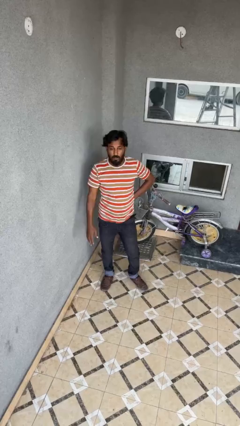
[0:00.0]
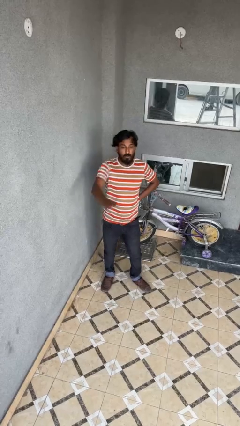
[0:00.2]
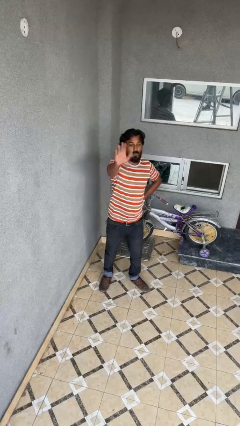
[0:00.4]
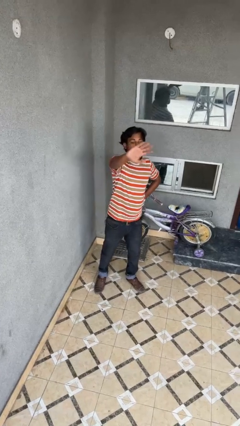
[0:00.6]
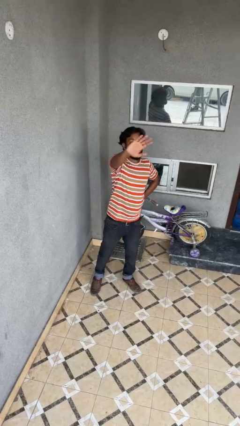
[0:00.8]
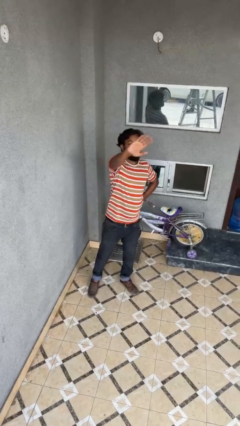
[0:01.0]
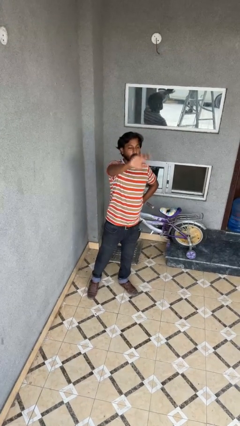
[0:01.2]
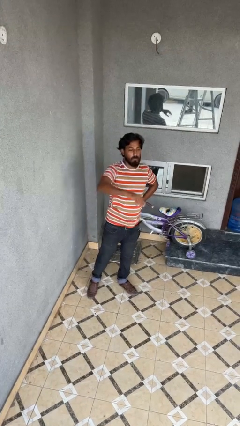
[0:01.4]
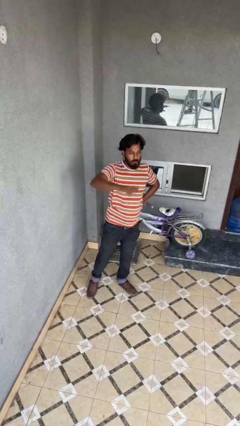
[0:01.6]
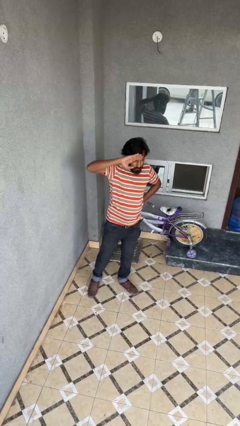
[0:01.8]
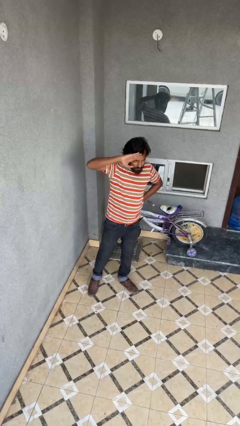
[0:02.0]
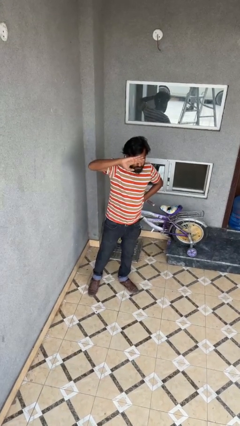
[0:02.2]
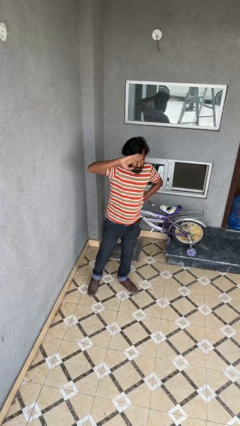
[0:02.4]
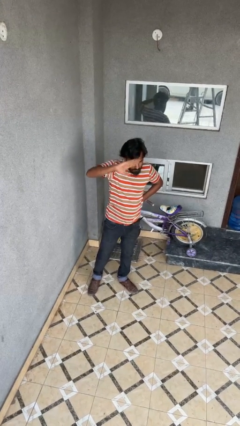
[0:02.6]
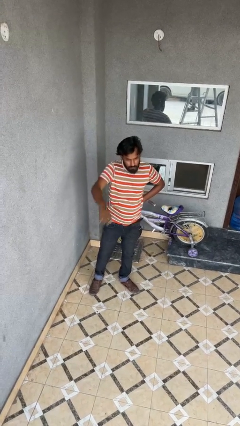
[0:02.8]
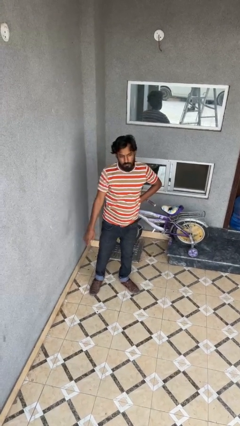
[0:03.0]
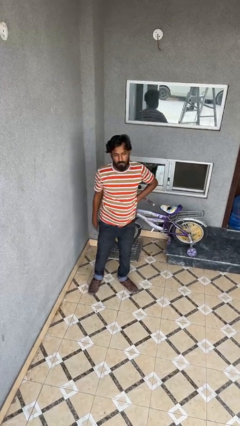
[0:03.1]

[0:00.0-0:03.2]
person waves at person

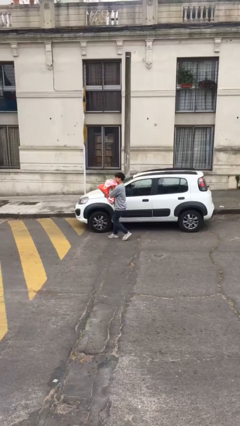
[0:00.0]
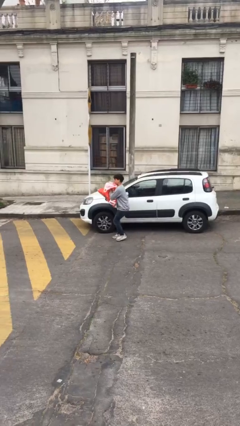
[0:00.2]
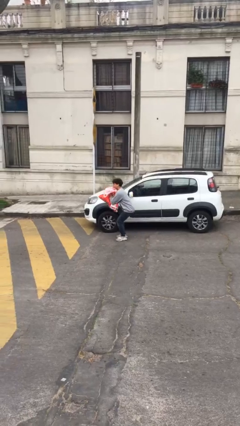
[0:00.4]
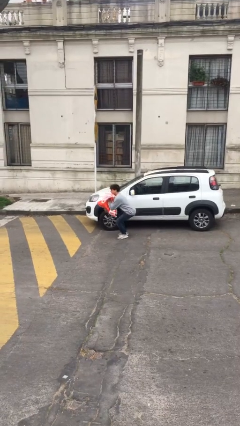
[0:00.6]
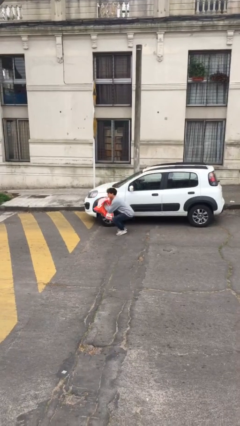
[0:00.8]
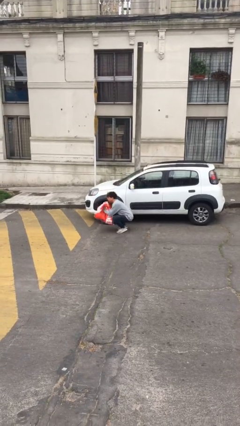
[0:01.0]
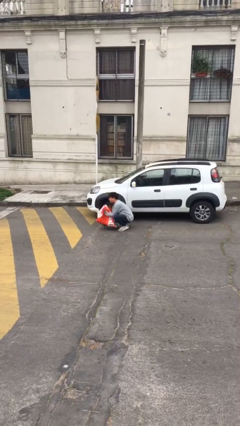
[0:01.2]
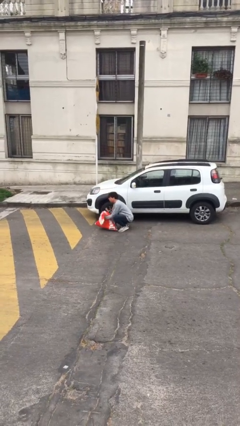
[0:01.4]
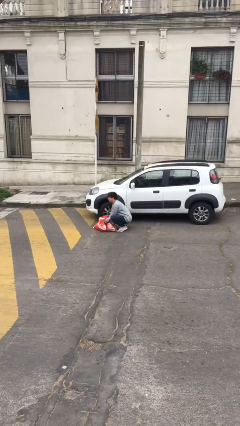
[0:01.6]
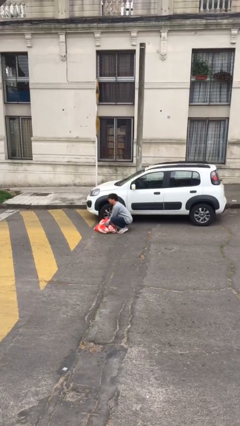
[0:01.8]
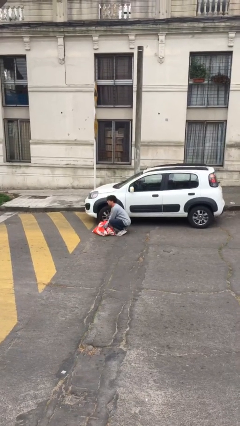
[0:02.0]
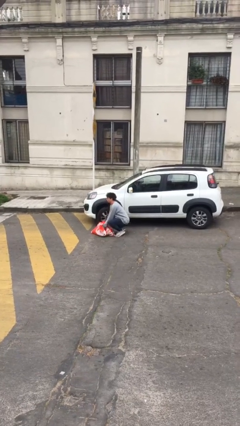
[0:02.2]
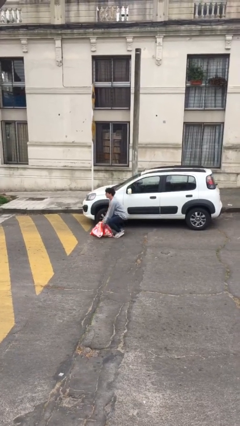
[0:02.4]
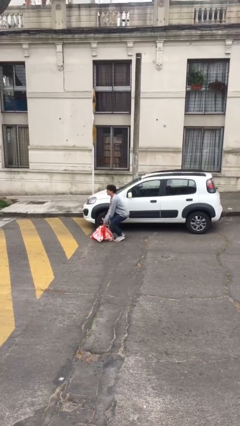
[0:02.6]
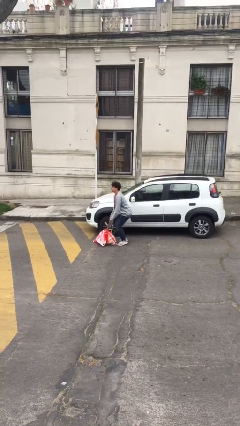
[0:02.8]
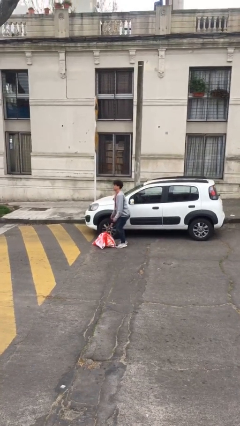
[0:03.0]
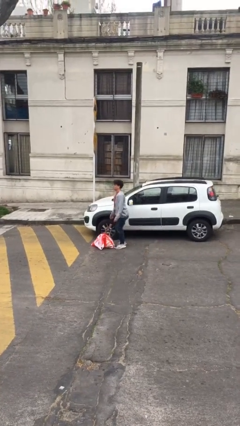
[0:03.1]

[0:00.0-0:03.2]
person puts down object on floor

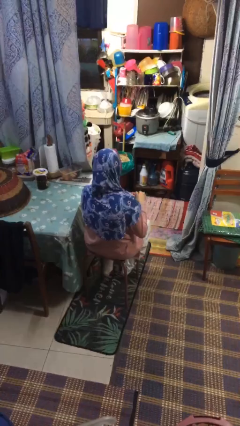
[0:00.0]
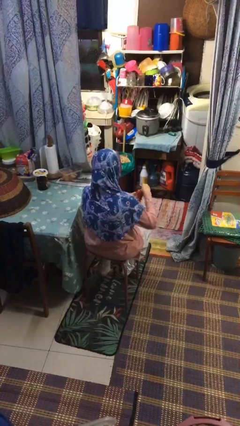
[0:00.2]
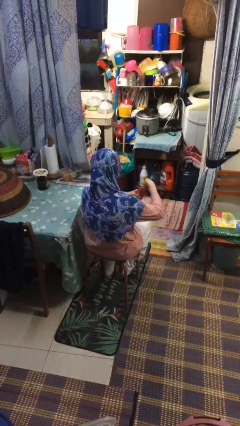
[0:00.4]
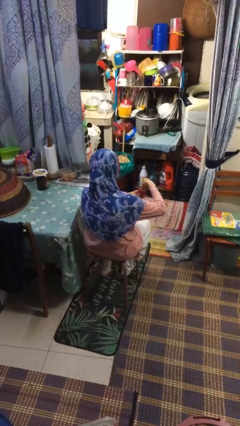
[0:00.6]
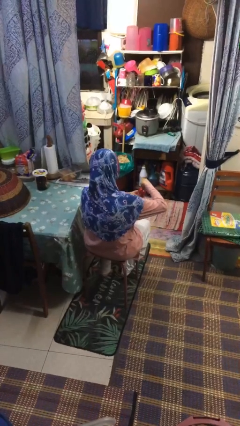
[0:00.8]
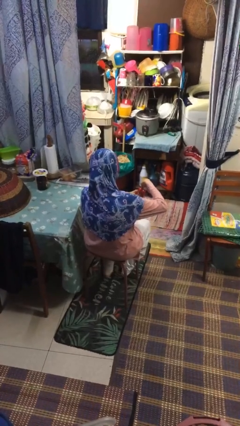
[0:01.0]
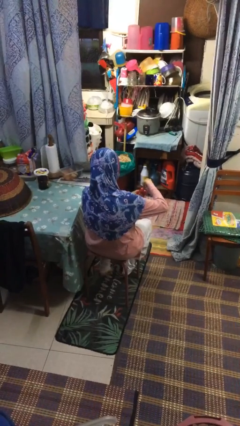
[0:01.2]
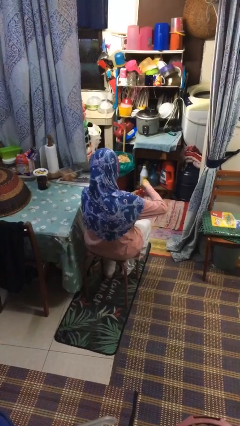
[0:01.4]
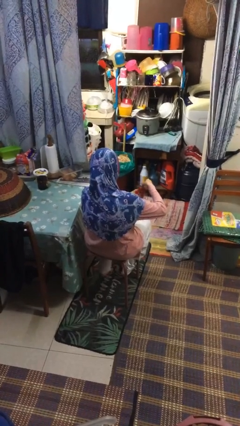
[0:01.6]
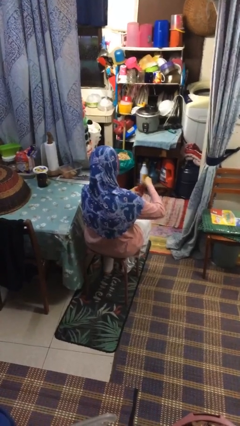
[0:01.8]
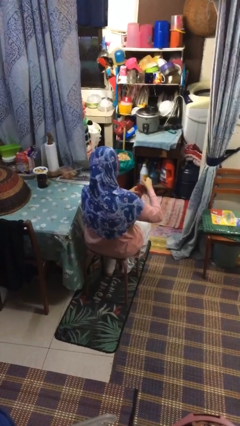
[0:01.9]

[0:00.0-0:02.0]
person opens beverage can

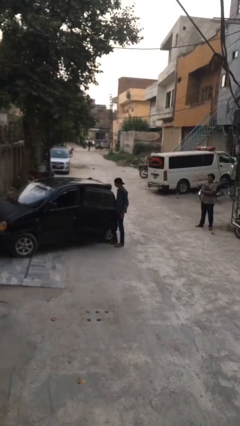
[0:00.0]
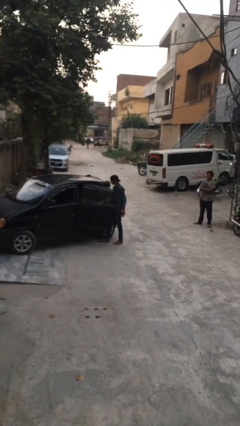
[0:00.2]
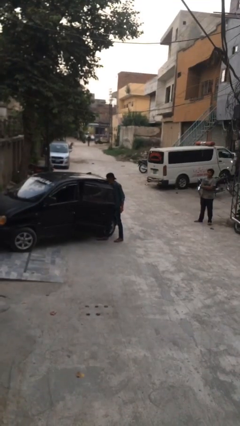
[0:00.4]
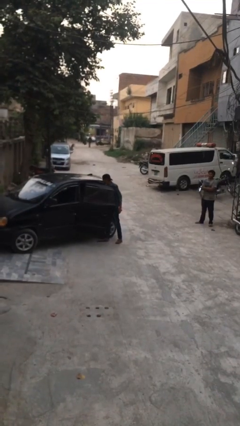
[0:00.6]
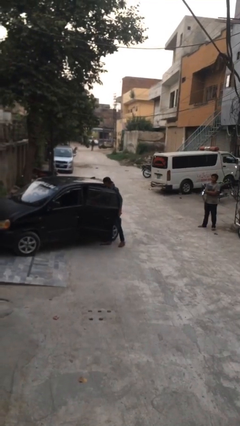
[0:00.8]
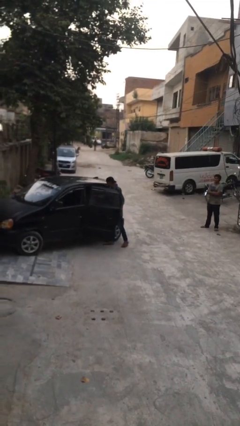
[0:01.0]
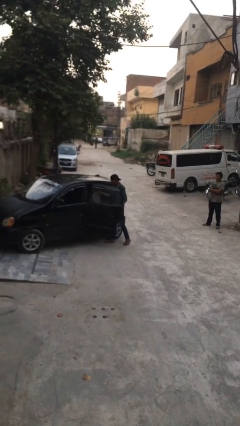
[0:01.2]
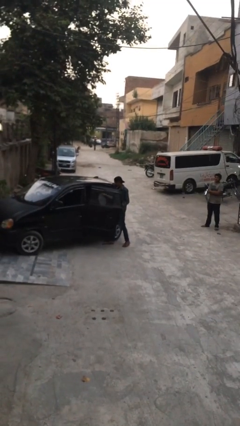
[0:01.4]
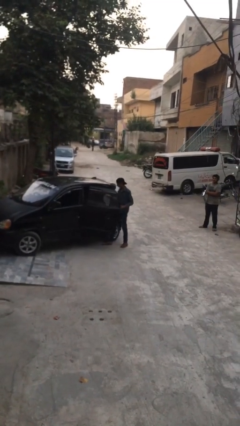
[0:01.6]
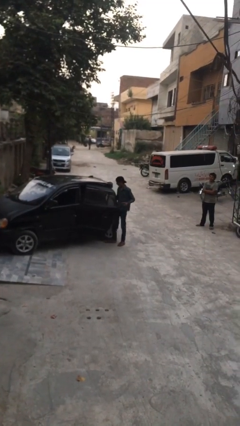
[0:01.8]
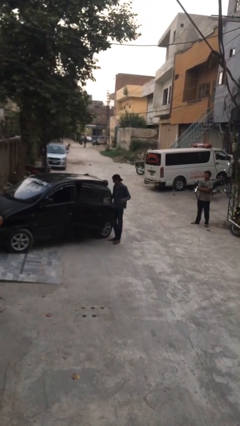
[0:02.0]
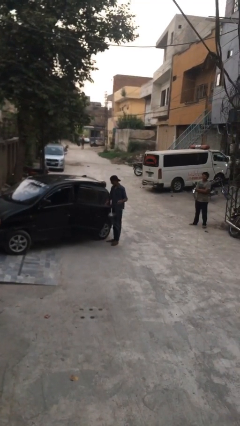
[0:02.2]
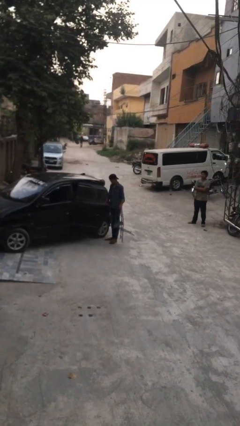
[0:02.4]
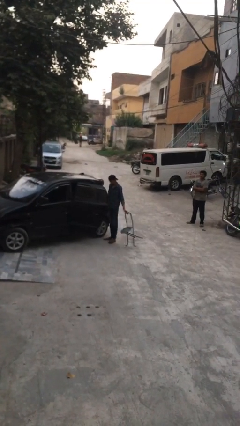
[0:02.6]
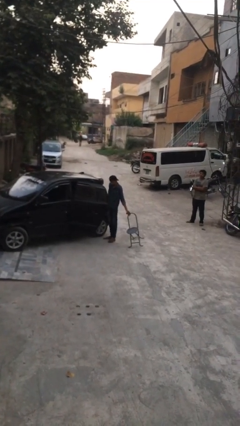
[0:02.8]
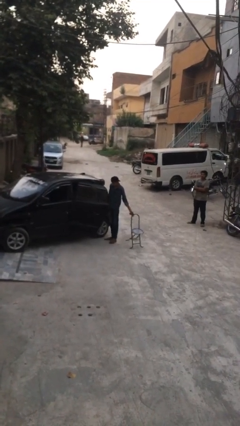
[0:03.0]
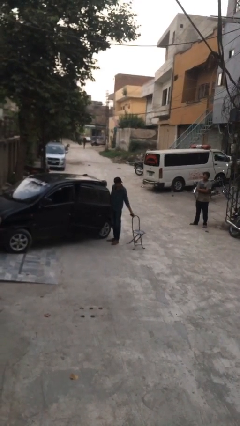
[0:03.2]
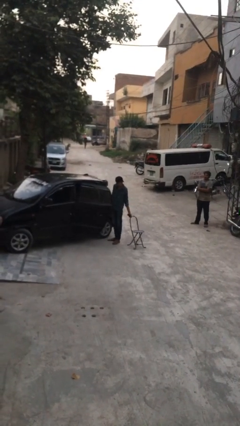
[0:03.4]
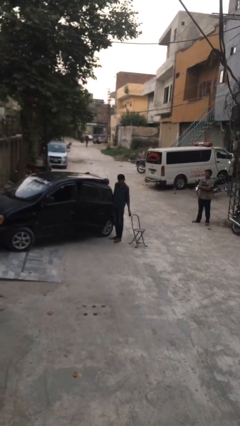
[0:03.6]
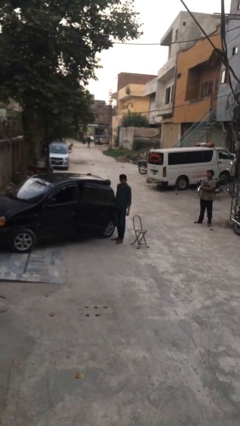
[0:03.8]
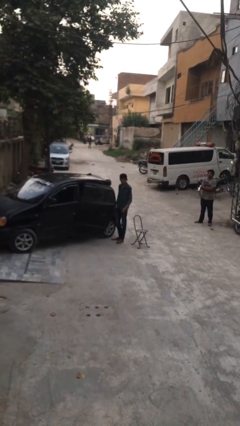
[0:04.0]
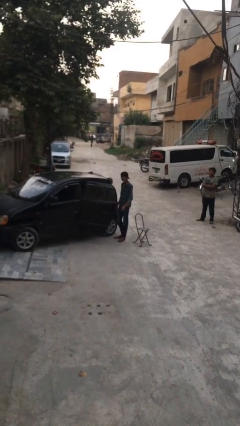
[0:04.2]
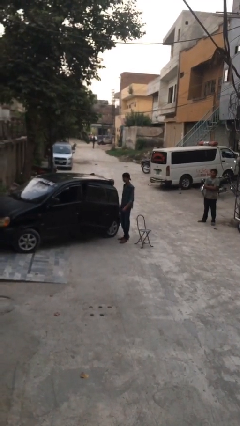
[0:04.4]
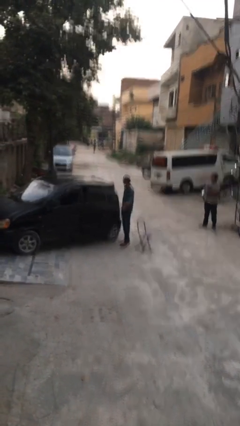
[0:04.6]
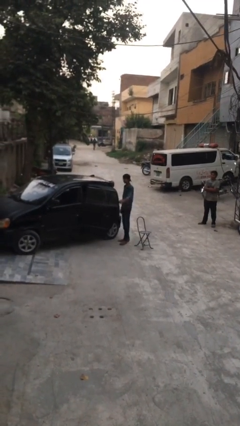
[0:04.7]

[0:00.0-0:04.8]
person unloads car

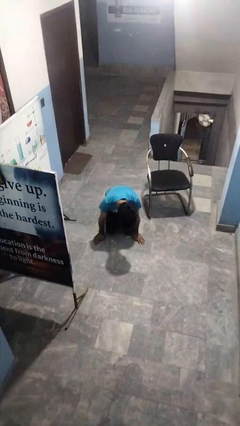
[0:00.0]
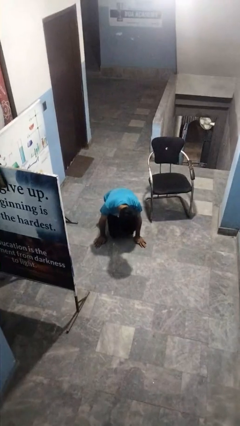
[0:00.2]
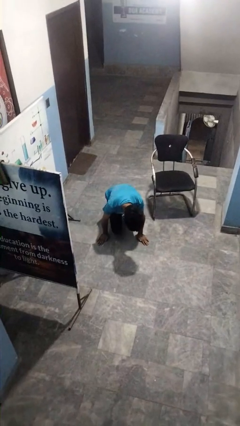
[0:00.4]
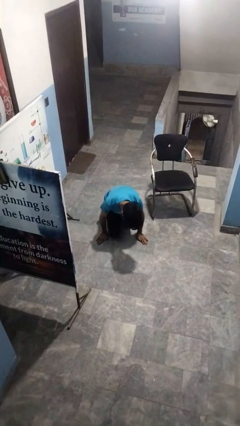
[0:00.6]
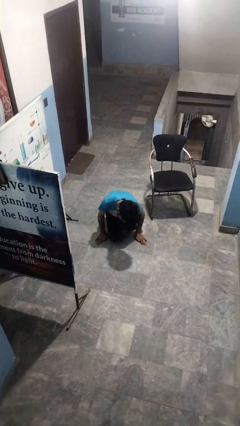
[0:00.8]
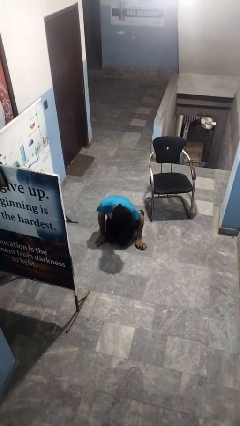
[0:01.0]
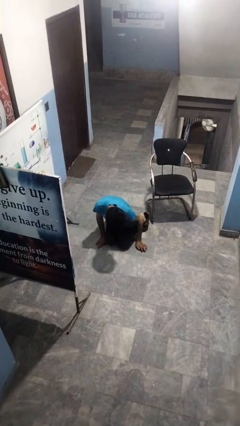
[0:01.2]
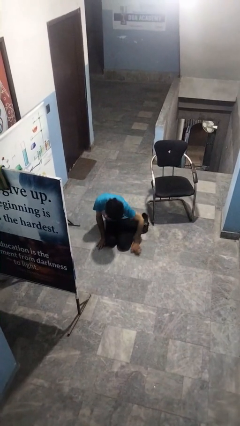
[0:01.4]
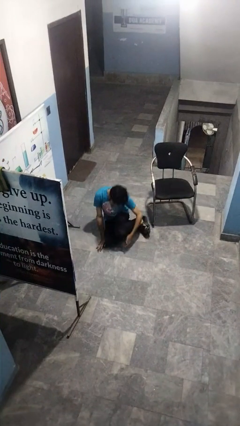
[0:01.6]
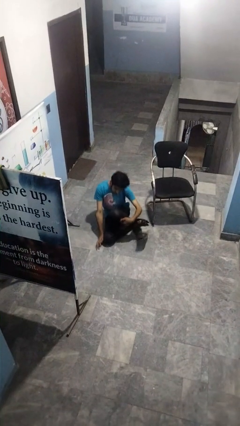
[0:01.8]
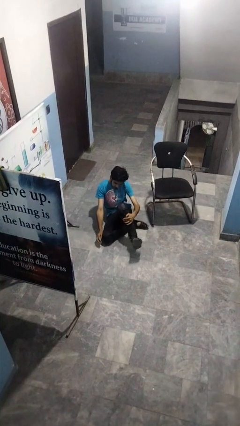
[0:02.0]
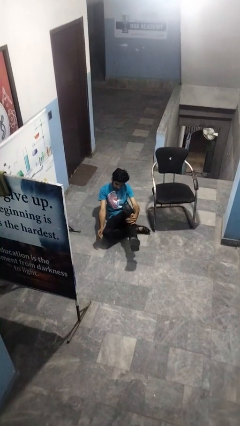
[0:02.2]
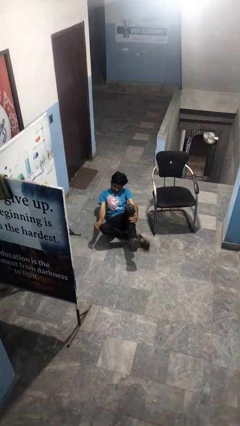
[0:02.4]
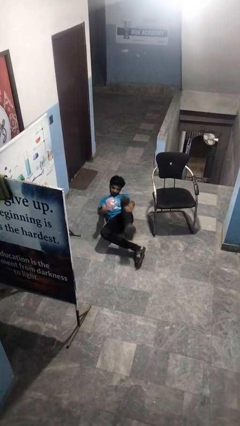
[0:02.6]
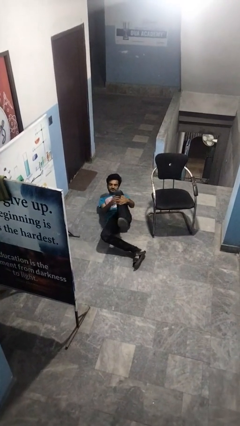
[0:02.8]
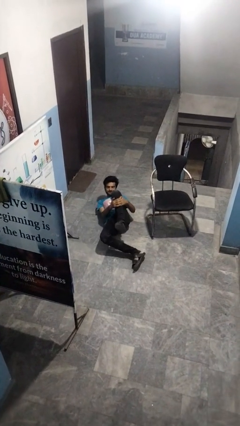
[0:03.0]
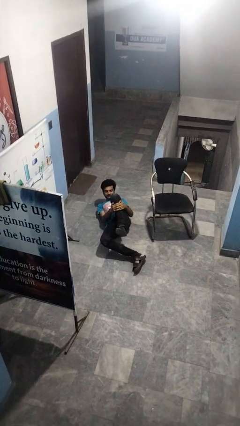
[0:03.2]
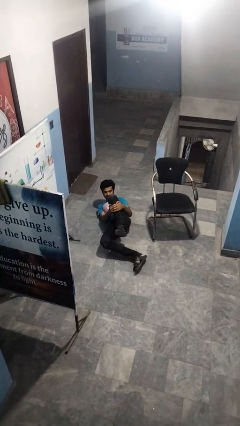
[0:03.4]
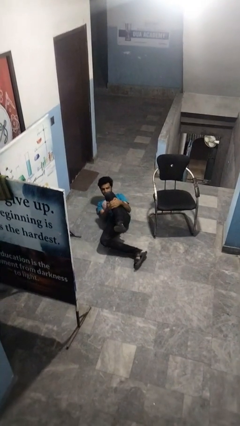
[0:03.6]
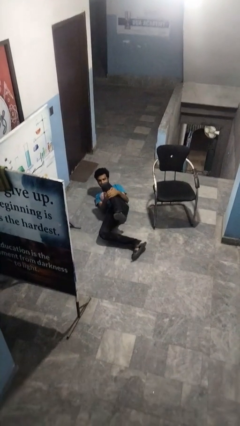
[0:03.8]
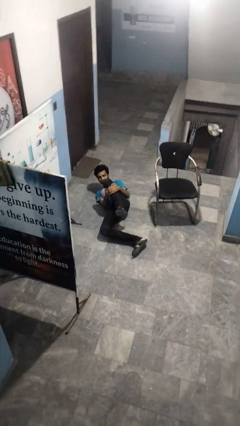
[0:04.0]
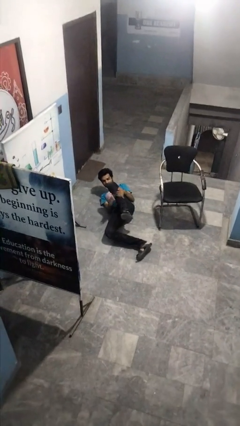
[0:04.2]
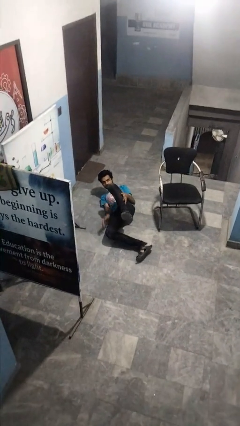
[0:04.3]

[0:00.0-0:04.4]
person lies down on floor

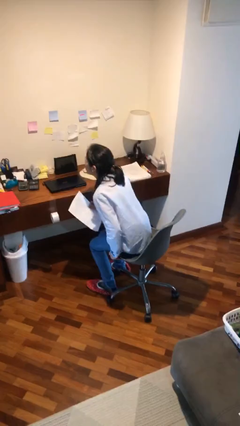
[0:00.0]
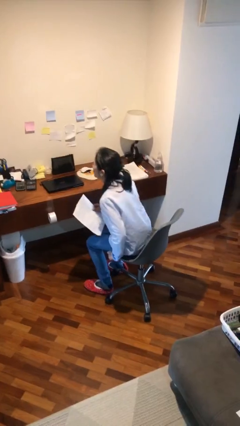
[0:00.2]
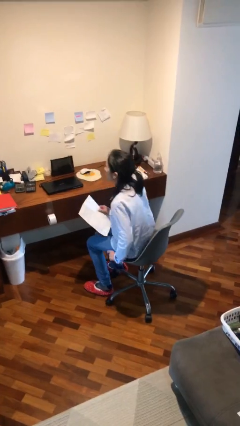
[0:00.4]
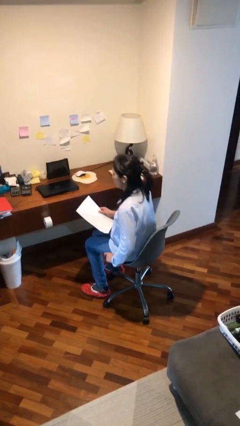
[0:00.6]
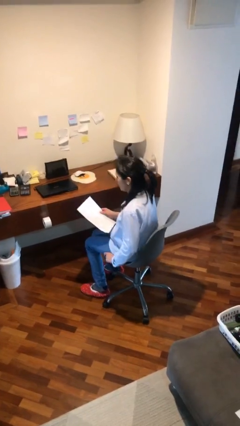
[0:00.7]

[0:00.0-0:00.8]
person sits down
